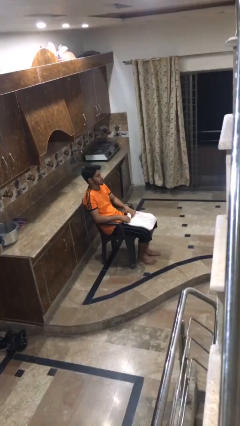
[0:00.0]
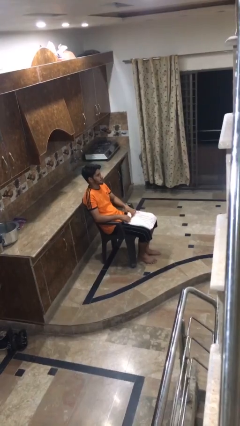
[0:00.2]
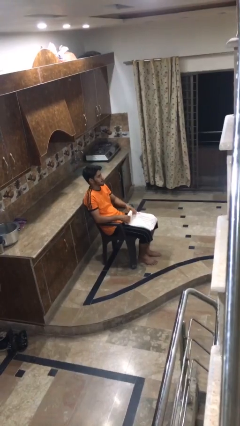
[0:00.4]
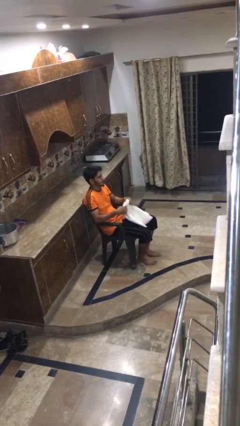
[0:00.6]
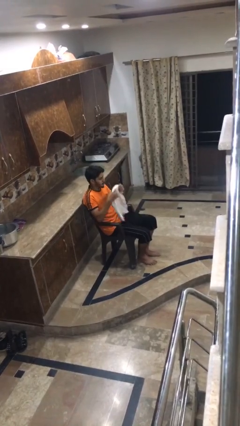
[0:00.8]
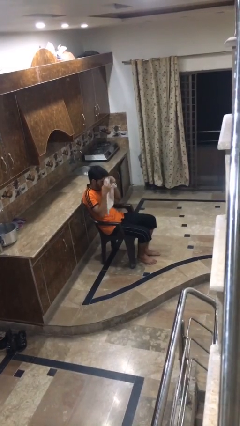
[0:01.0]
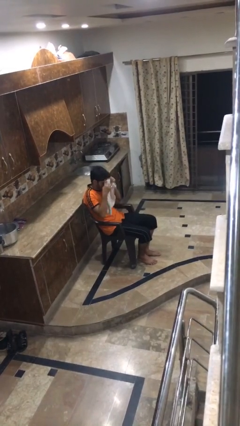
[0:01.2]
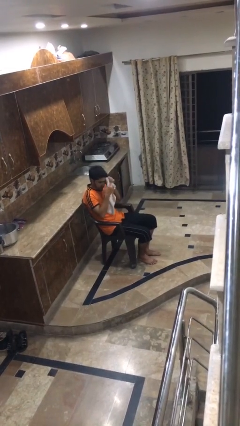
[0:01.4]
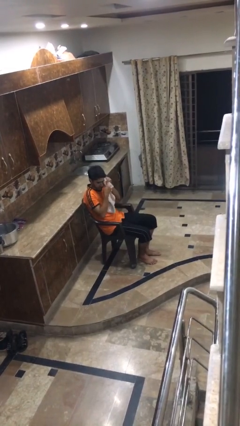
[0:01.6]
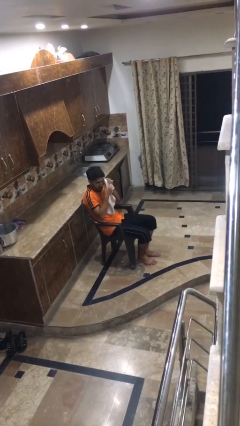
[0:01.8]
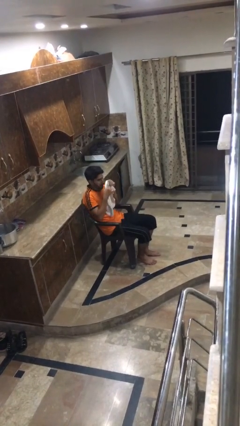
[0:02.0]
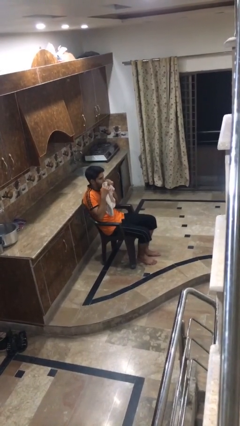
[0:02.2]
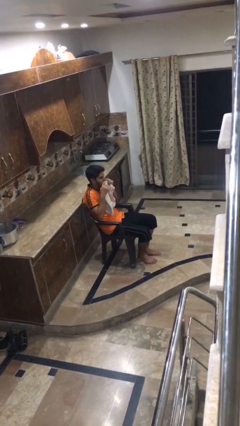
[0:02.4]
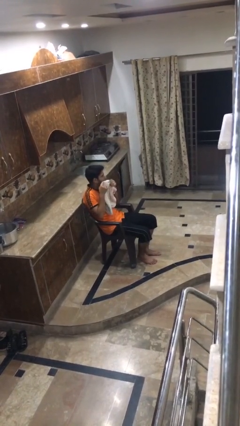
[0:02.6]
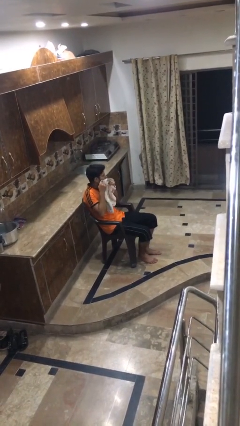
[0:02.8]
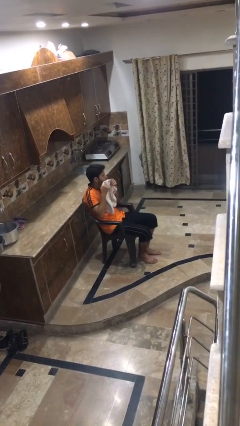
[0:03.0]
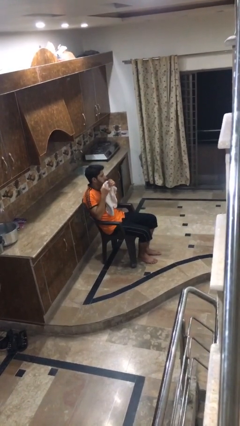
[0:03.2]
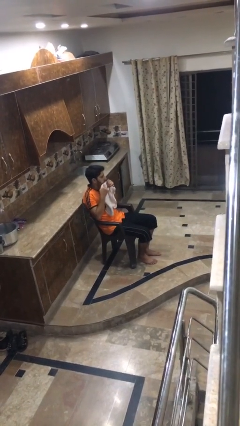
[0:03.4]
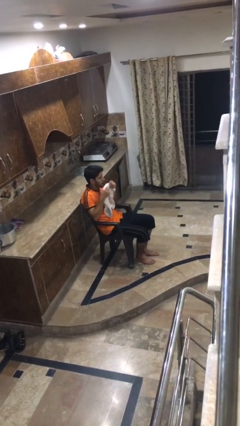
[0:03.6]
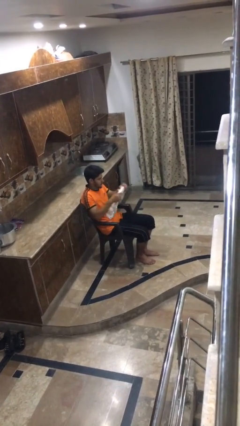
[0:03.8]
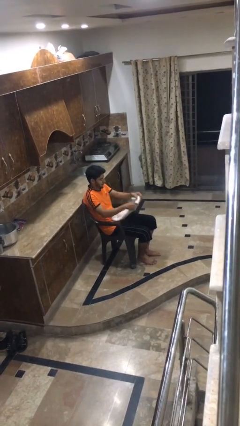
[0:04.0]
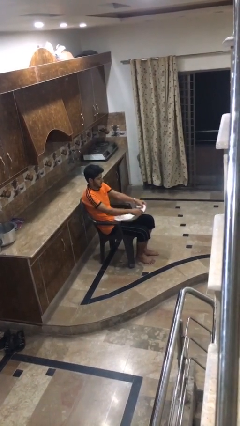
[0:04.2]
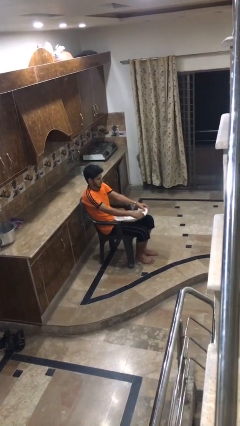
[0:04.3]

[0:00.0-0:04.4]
person wipes mouth with napkin

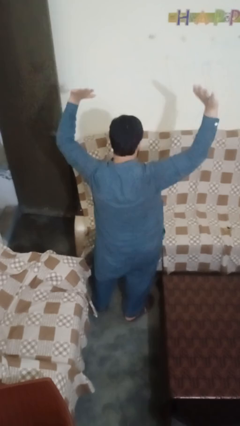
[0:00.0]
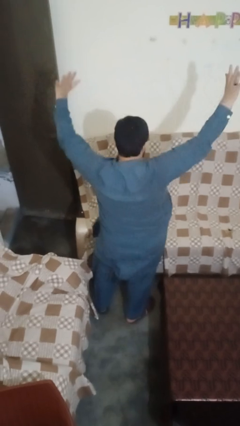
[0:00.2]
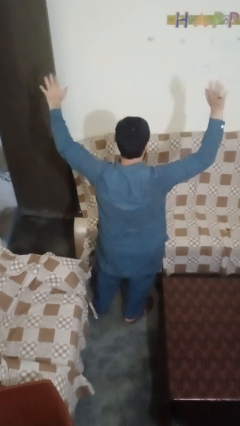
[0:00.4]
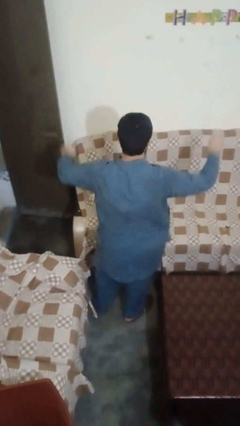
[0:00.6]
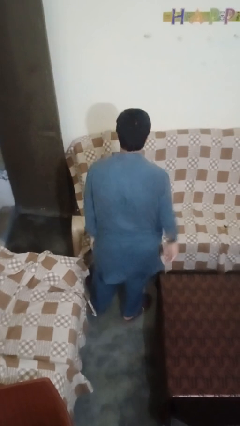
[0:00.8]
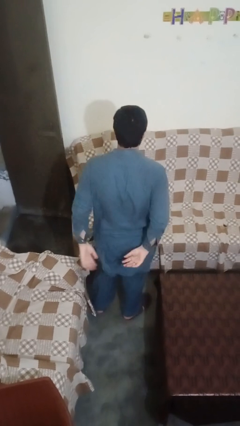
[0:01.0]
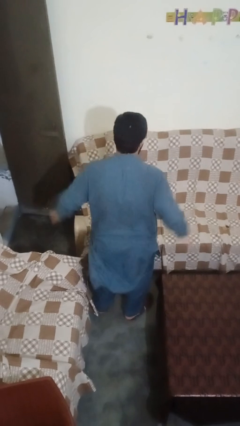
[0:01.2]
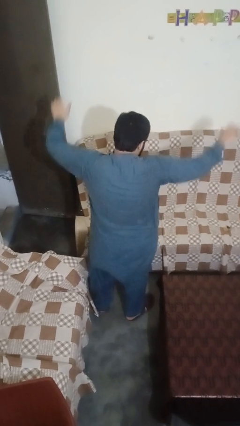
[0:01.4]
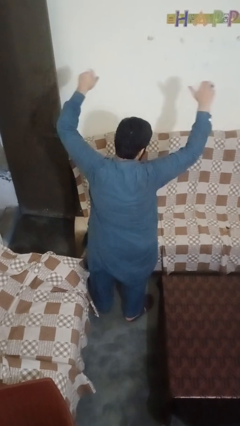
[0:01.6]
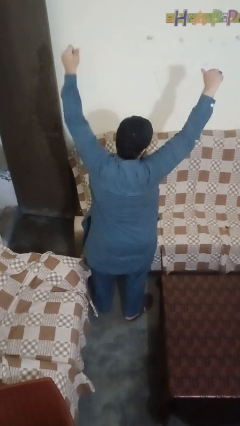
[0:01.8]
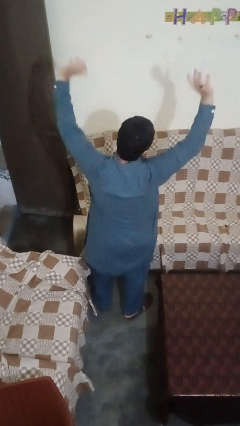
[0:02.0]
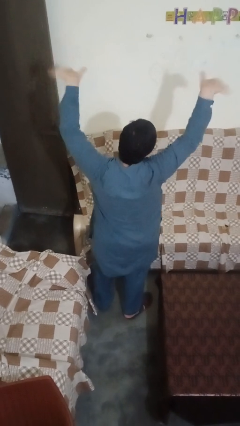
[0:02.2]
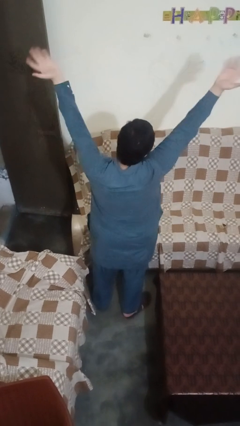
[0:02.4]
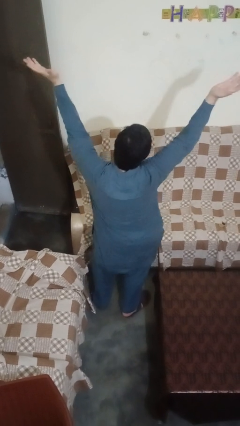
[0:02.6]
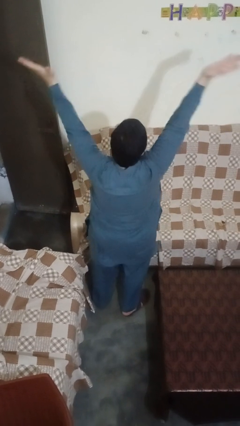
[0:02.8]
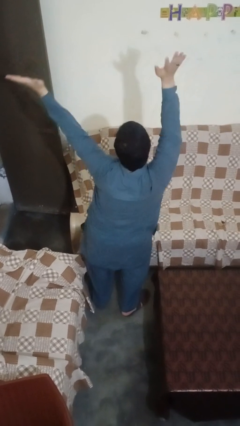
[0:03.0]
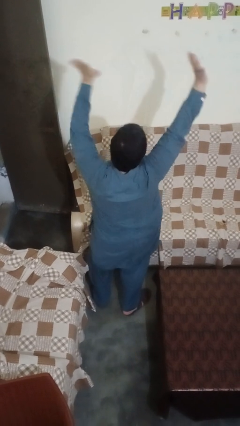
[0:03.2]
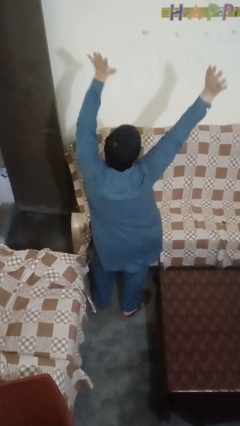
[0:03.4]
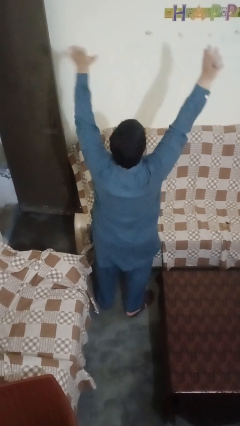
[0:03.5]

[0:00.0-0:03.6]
person dances in place

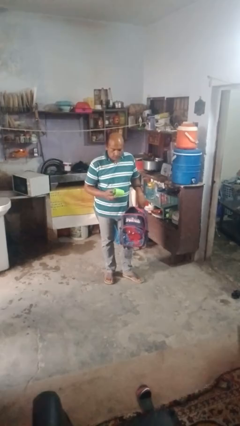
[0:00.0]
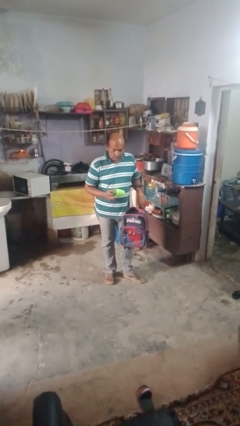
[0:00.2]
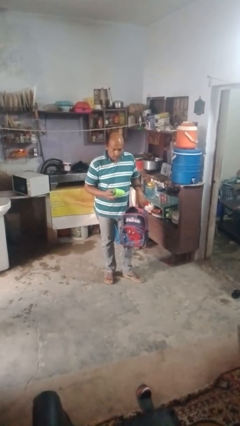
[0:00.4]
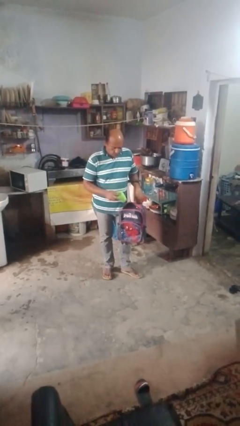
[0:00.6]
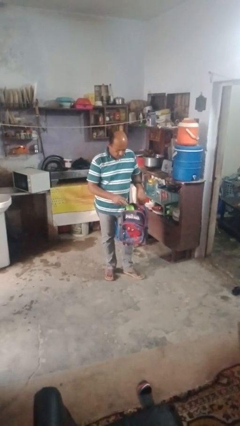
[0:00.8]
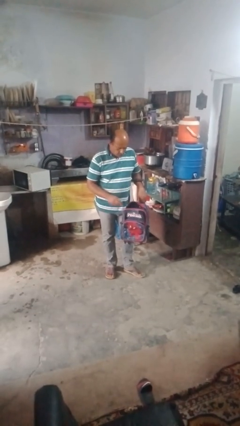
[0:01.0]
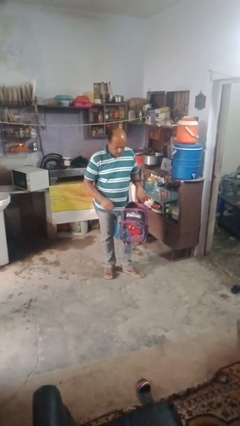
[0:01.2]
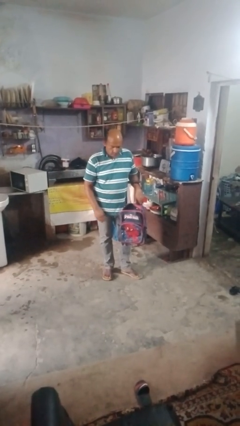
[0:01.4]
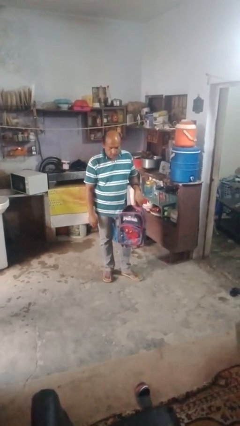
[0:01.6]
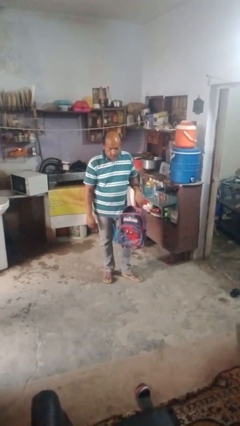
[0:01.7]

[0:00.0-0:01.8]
person puts object into bag

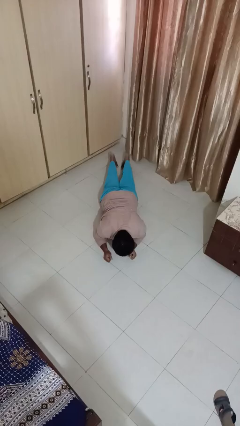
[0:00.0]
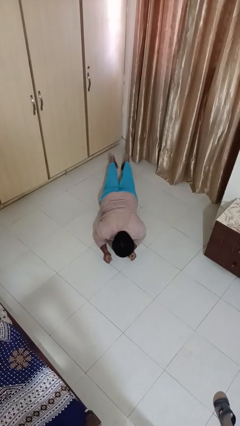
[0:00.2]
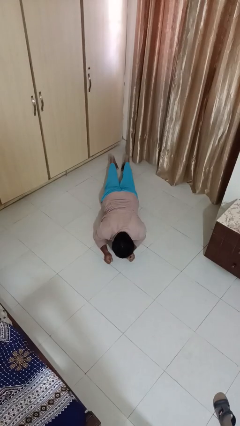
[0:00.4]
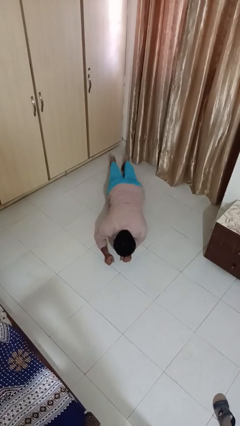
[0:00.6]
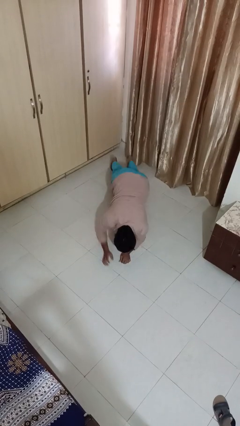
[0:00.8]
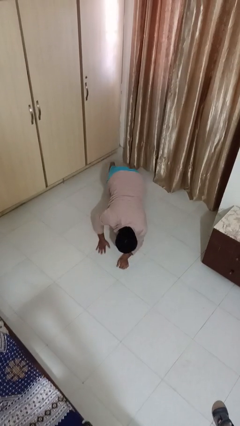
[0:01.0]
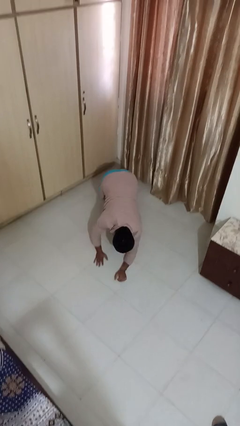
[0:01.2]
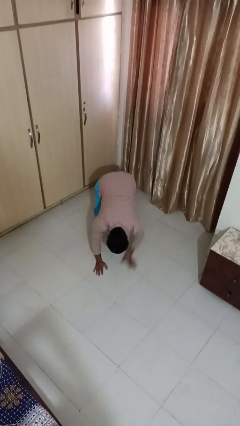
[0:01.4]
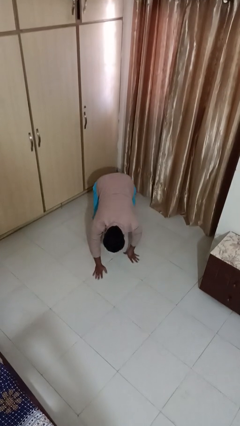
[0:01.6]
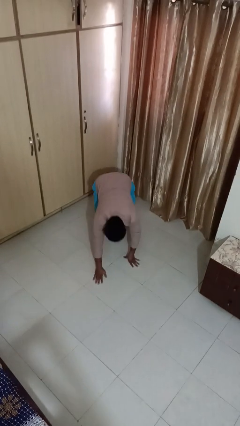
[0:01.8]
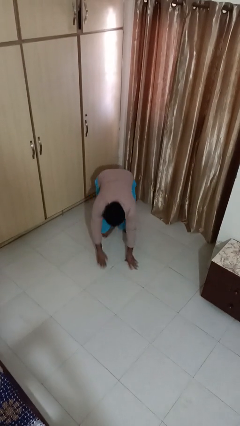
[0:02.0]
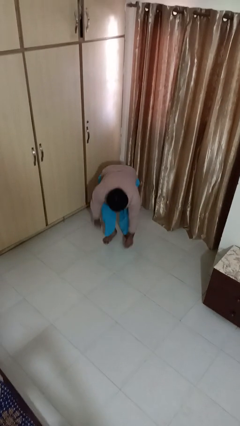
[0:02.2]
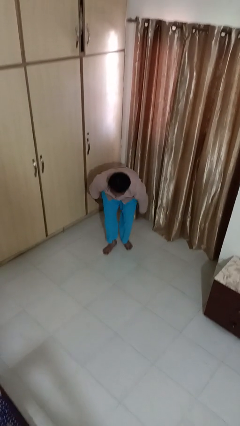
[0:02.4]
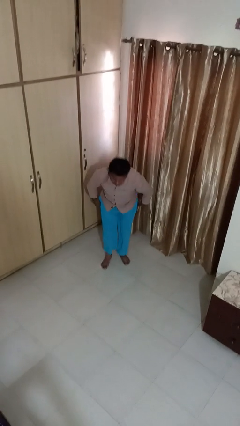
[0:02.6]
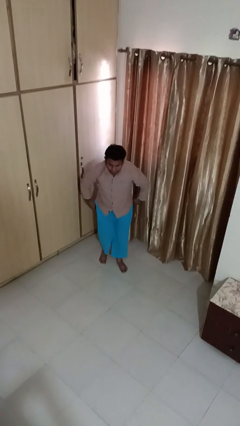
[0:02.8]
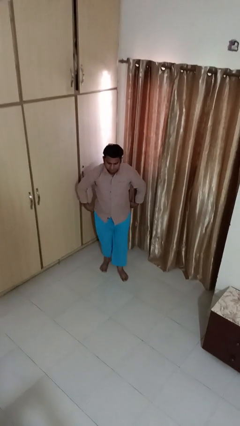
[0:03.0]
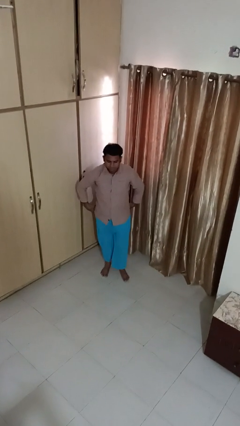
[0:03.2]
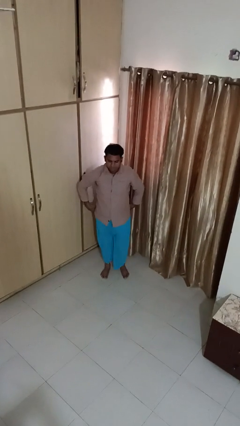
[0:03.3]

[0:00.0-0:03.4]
person stands up from floor

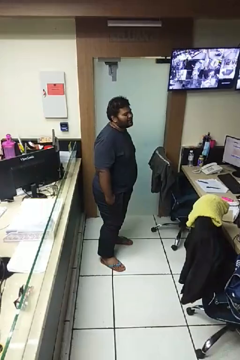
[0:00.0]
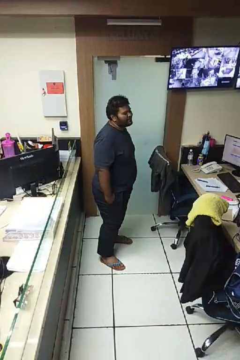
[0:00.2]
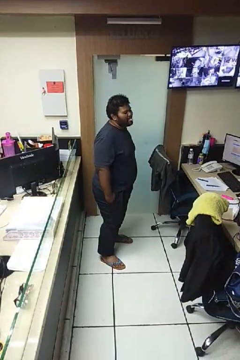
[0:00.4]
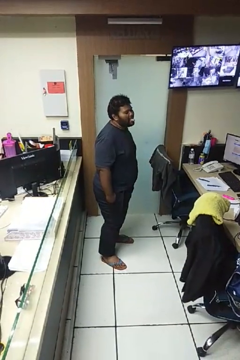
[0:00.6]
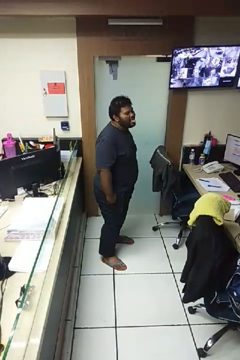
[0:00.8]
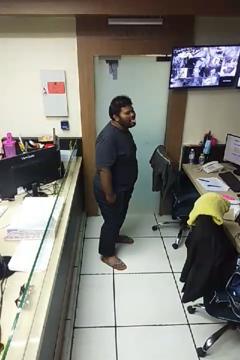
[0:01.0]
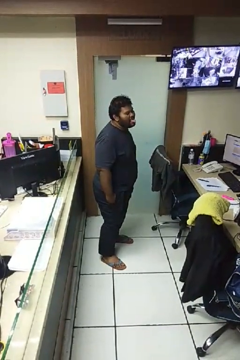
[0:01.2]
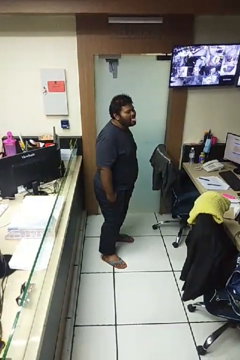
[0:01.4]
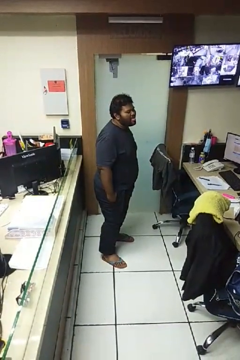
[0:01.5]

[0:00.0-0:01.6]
person sticks out tongue

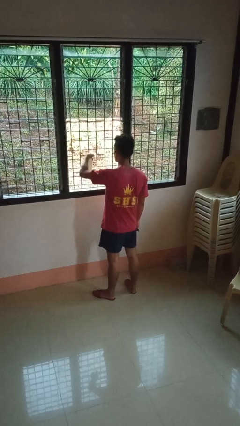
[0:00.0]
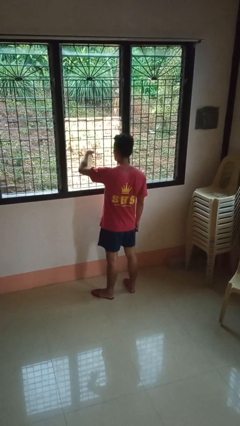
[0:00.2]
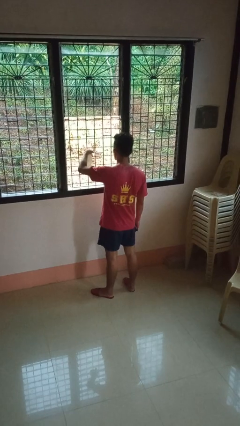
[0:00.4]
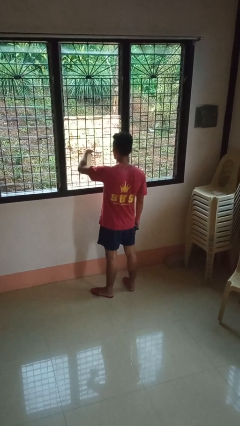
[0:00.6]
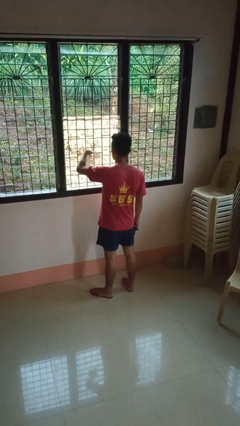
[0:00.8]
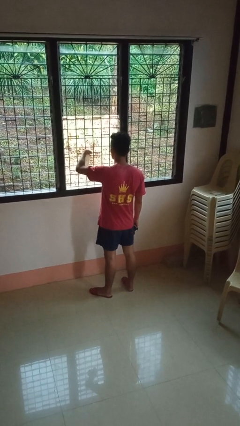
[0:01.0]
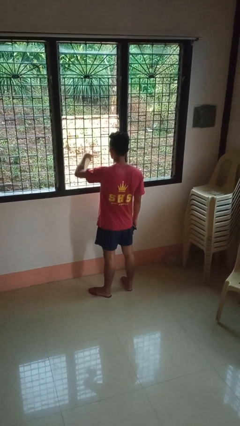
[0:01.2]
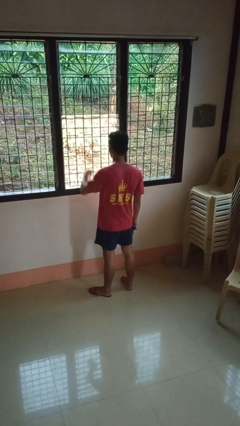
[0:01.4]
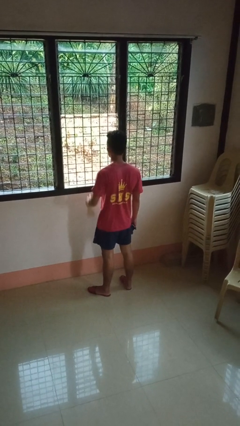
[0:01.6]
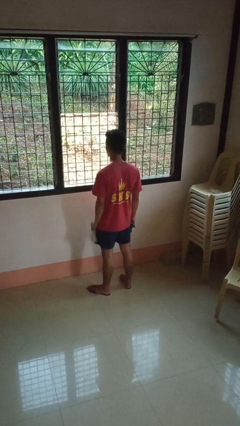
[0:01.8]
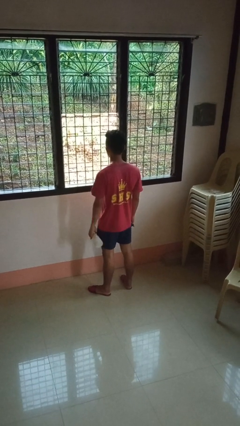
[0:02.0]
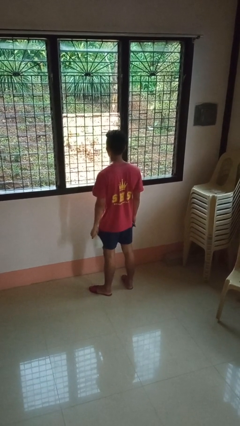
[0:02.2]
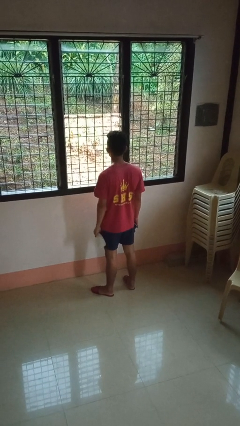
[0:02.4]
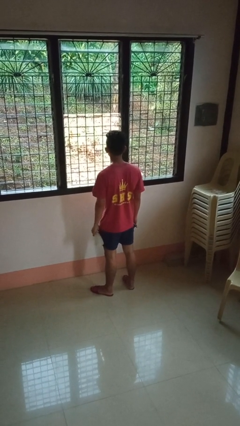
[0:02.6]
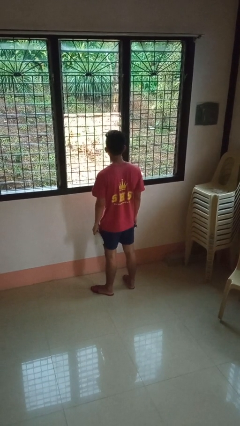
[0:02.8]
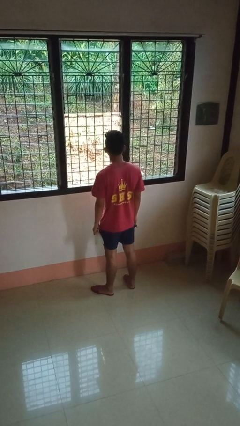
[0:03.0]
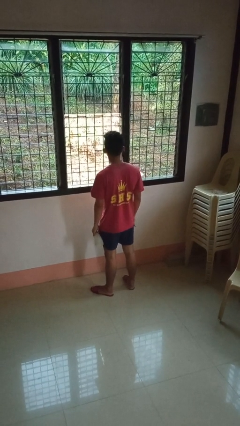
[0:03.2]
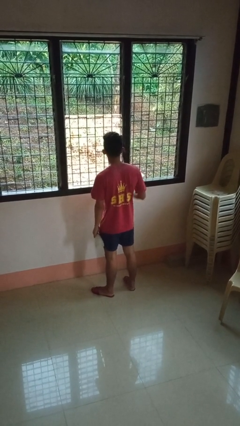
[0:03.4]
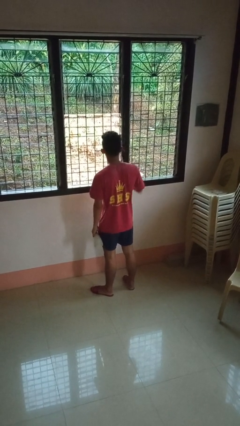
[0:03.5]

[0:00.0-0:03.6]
person sprays from bottle
